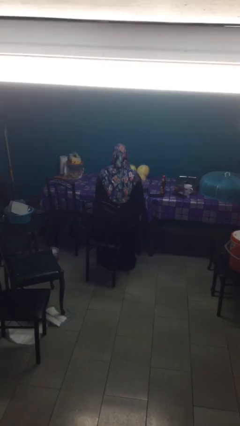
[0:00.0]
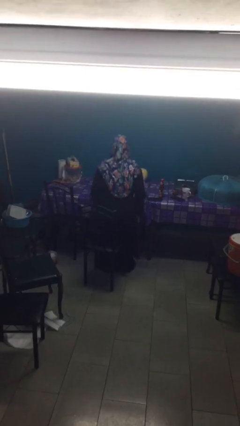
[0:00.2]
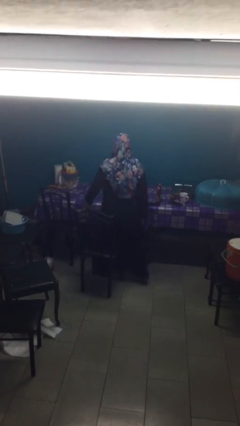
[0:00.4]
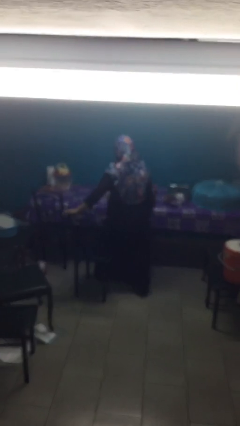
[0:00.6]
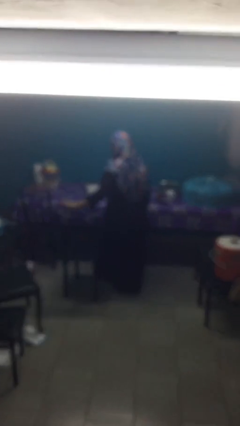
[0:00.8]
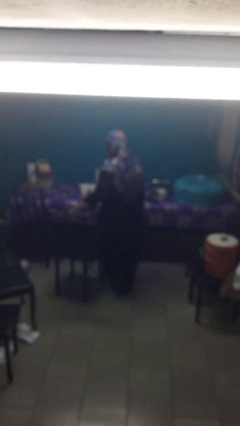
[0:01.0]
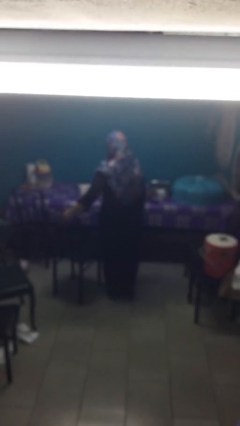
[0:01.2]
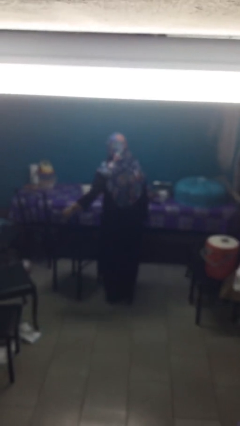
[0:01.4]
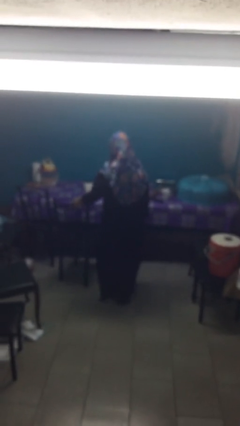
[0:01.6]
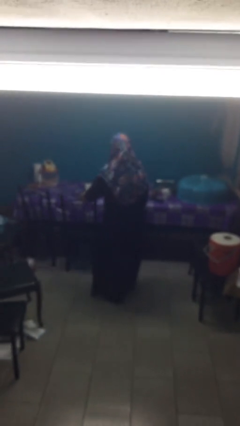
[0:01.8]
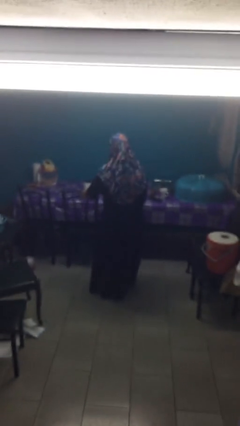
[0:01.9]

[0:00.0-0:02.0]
person stands up

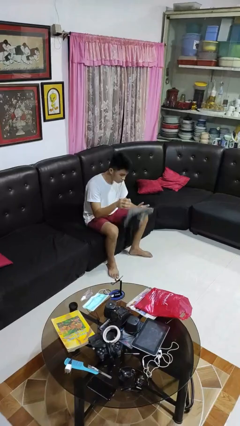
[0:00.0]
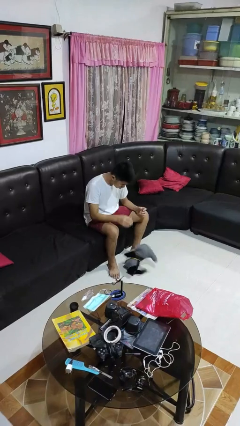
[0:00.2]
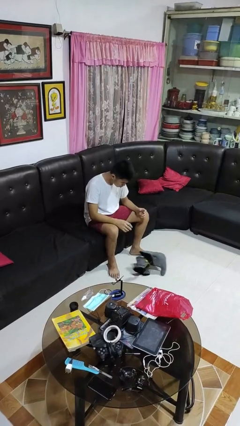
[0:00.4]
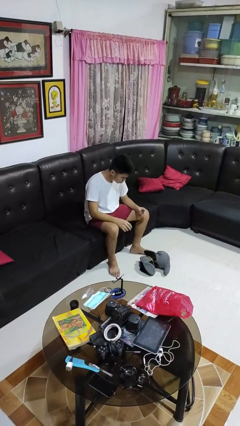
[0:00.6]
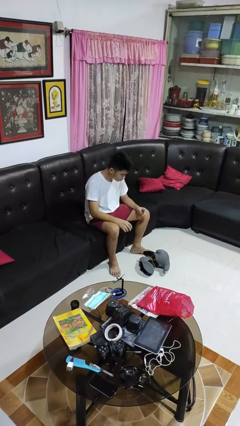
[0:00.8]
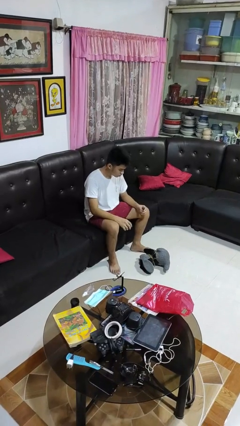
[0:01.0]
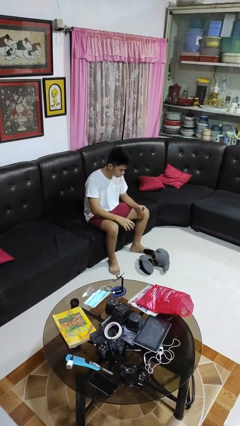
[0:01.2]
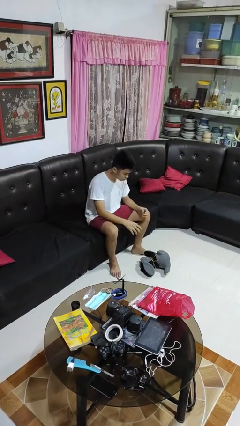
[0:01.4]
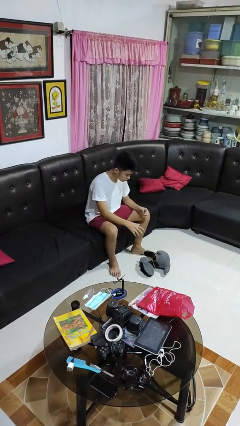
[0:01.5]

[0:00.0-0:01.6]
person drops object

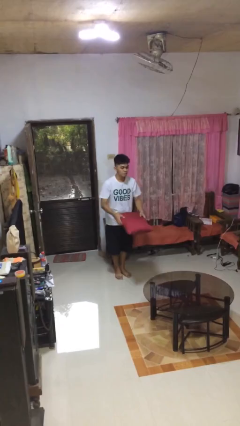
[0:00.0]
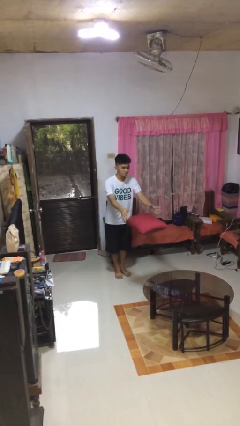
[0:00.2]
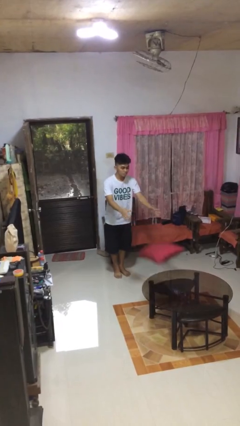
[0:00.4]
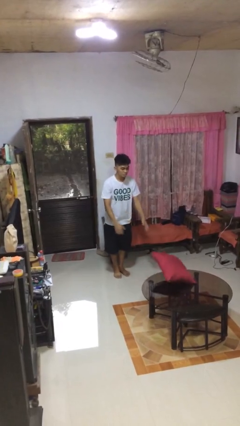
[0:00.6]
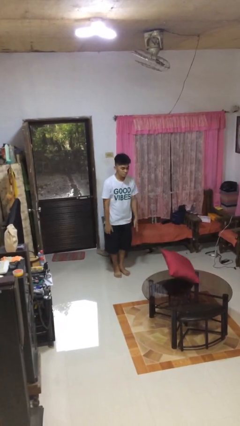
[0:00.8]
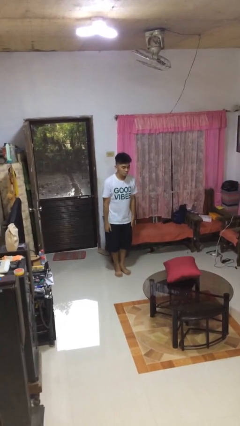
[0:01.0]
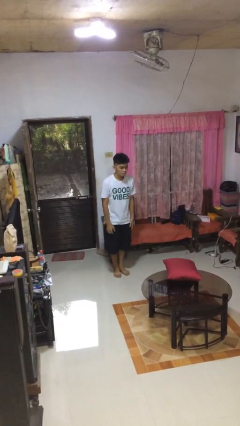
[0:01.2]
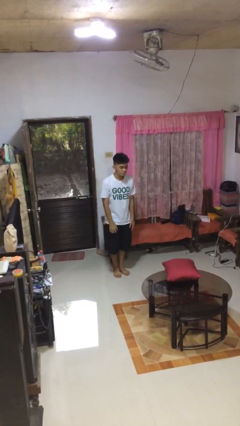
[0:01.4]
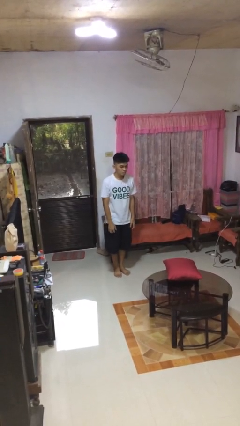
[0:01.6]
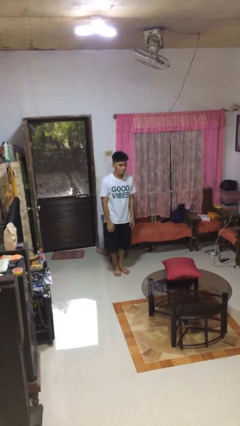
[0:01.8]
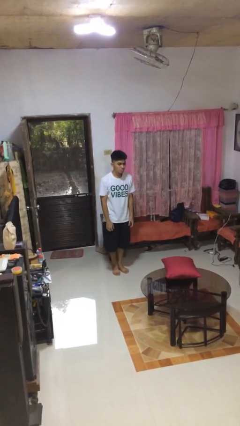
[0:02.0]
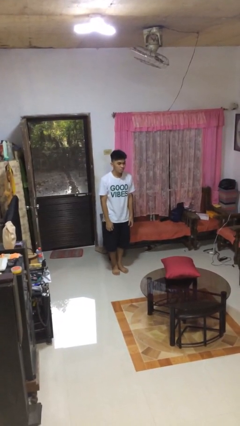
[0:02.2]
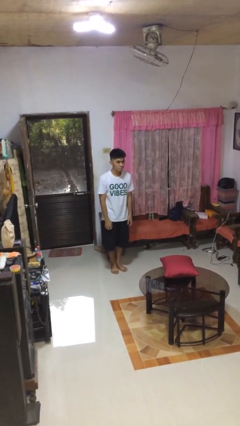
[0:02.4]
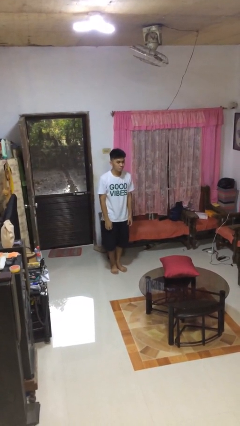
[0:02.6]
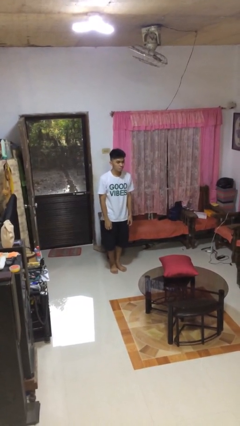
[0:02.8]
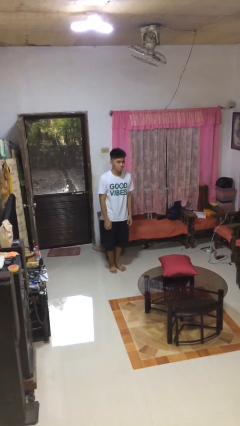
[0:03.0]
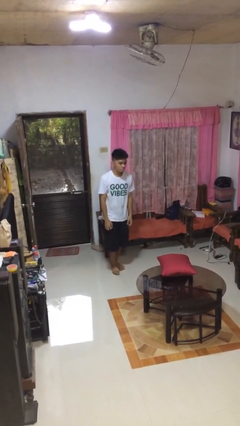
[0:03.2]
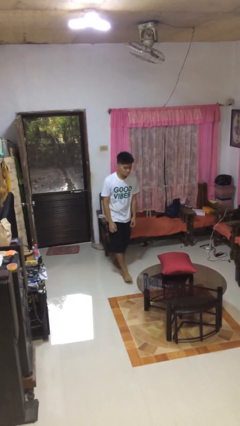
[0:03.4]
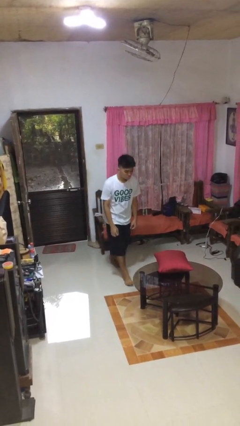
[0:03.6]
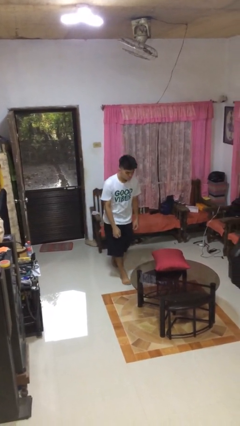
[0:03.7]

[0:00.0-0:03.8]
person throws object on table

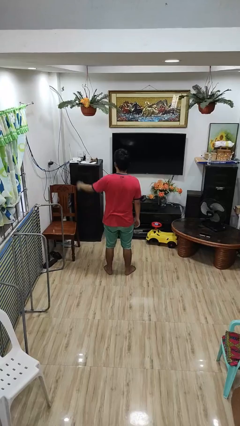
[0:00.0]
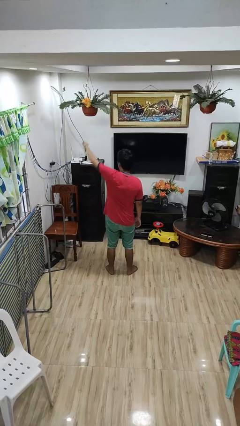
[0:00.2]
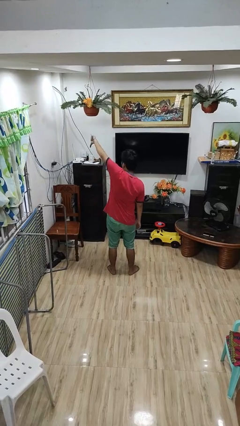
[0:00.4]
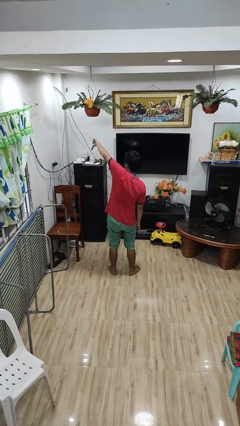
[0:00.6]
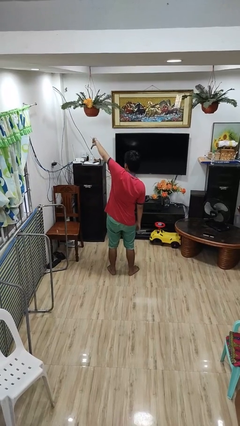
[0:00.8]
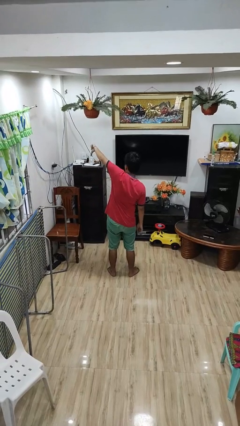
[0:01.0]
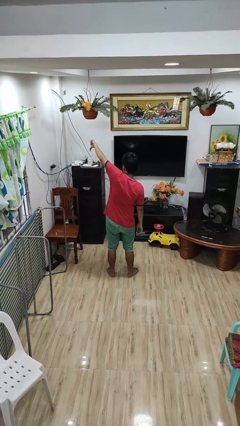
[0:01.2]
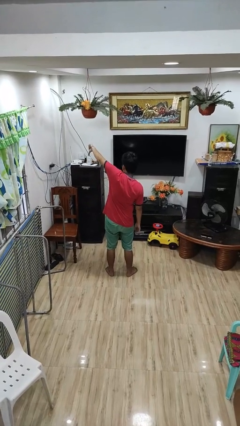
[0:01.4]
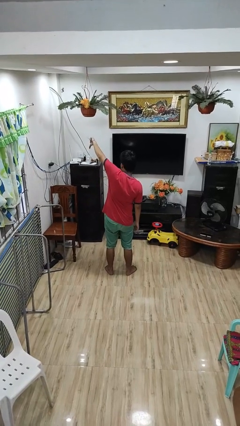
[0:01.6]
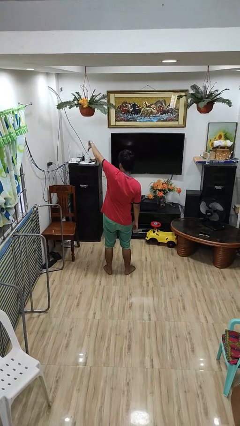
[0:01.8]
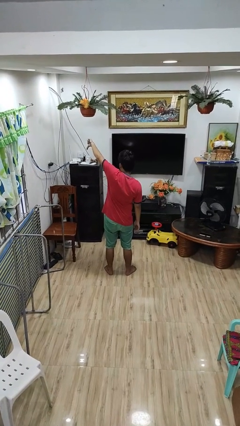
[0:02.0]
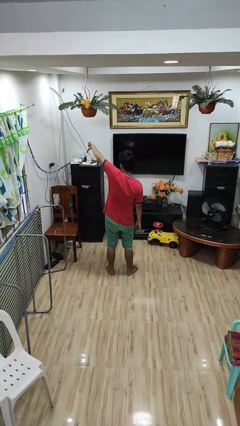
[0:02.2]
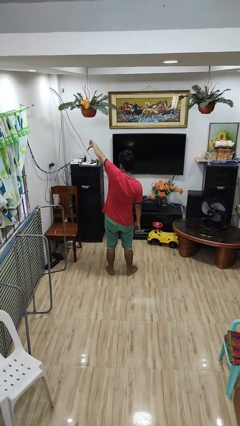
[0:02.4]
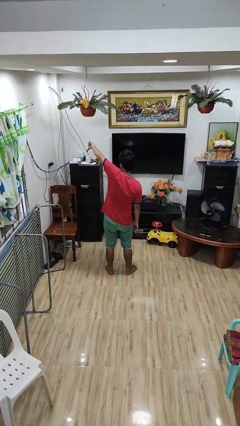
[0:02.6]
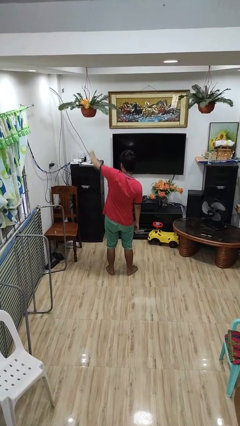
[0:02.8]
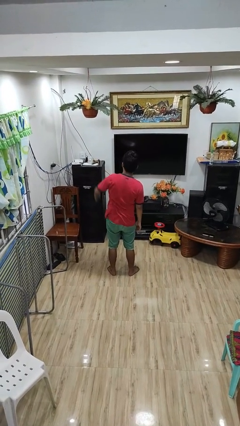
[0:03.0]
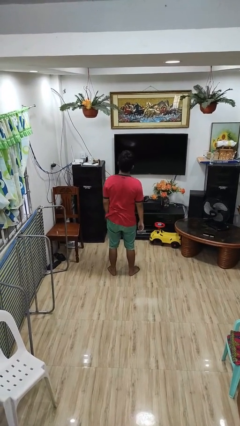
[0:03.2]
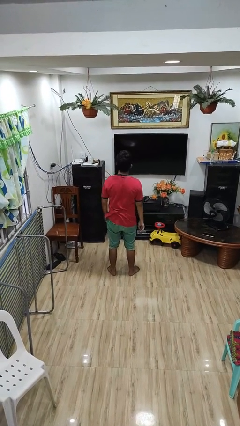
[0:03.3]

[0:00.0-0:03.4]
person gestures thumbs down

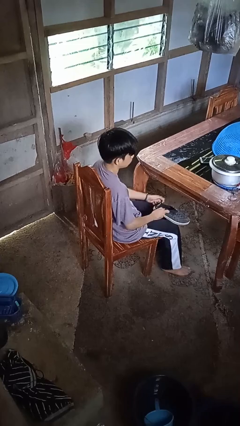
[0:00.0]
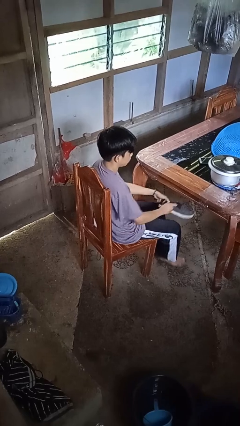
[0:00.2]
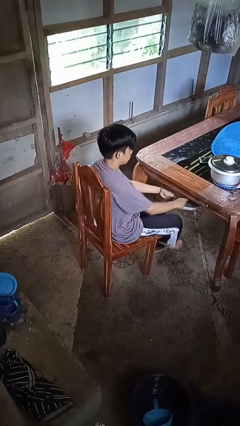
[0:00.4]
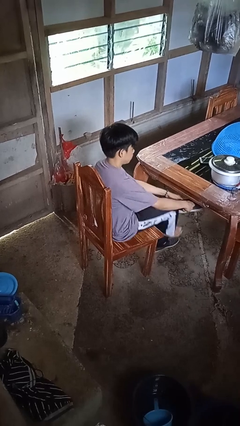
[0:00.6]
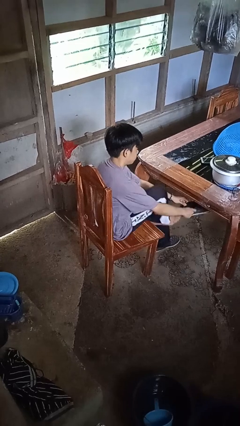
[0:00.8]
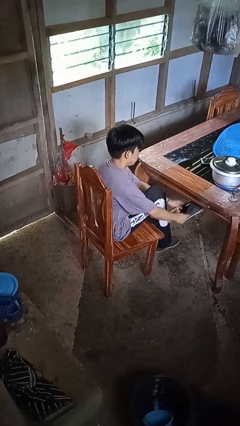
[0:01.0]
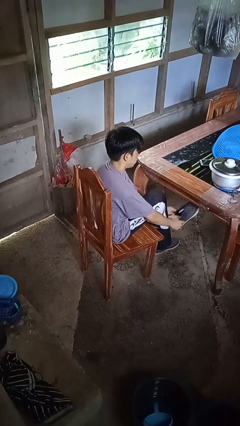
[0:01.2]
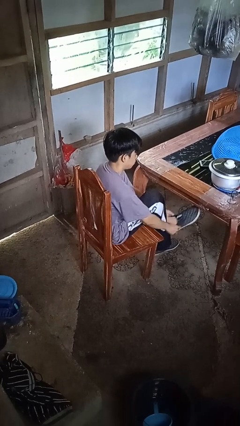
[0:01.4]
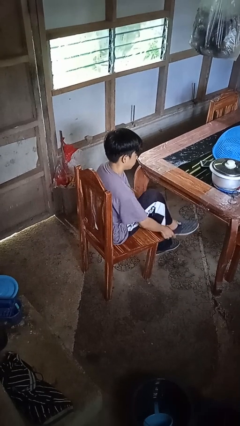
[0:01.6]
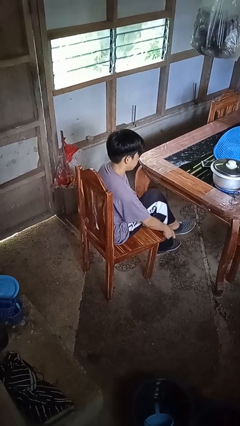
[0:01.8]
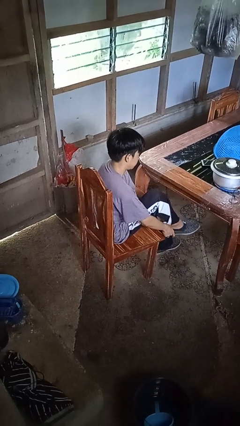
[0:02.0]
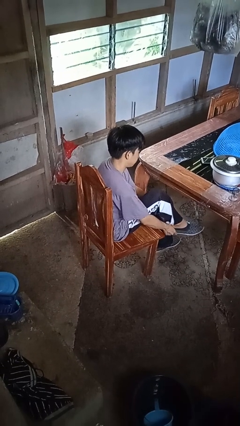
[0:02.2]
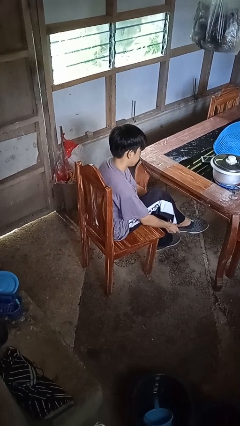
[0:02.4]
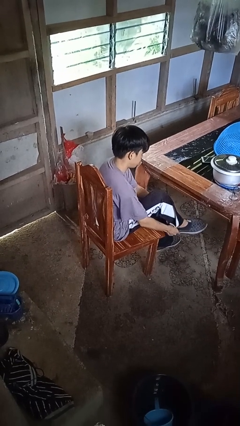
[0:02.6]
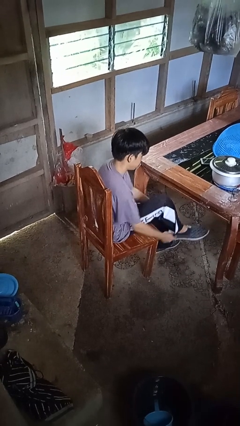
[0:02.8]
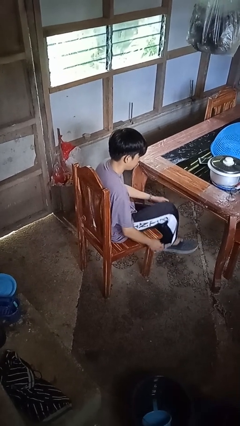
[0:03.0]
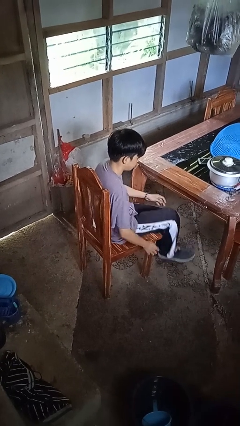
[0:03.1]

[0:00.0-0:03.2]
person puts on shoes

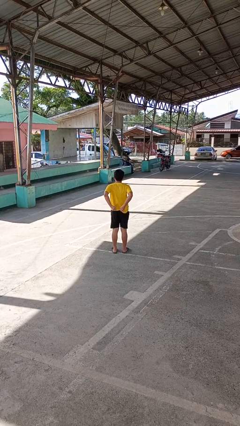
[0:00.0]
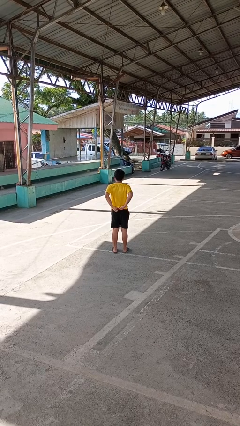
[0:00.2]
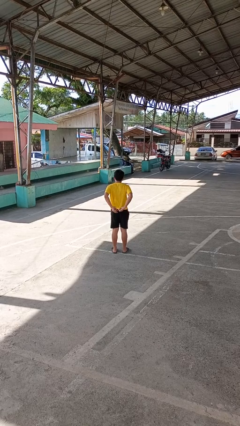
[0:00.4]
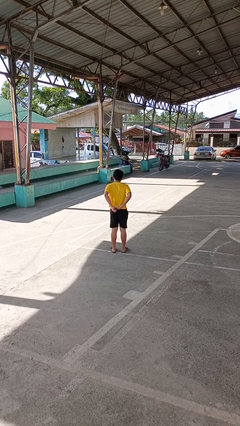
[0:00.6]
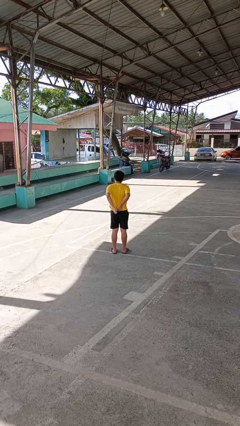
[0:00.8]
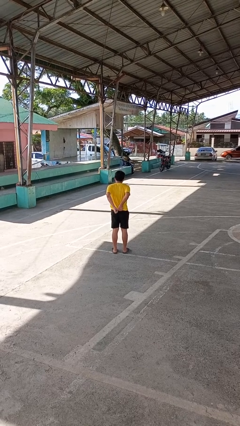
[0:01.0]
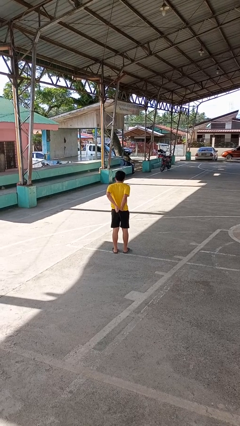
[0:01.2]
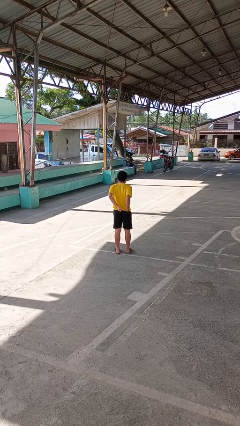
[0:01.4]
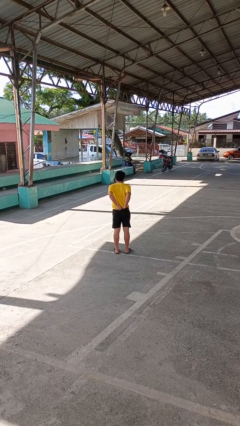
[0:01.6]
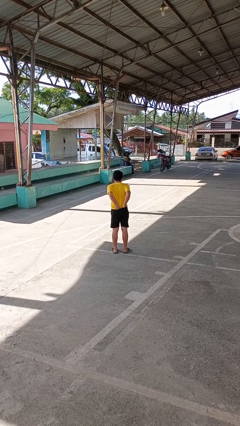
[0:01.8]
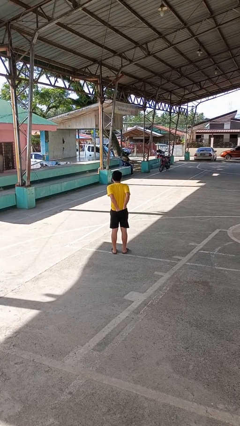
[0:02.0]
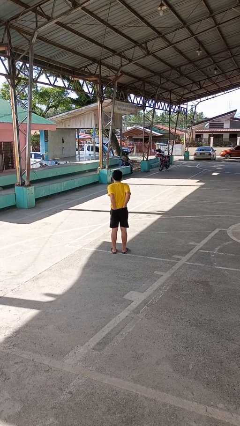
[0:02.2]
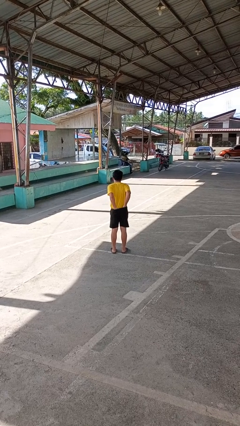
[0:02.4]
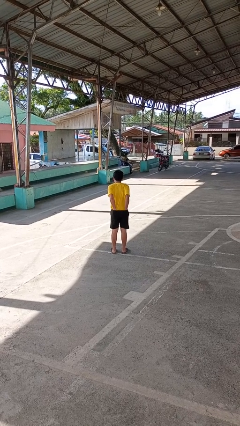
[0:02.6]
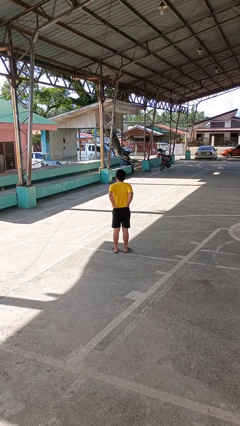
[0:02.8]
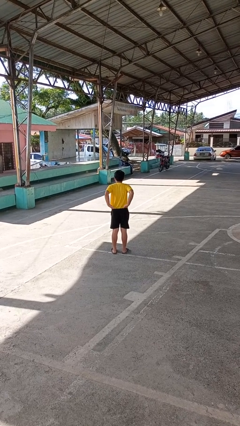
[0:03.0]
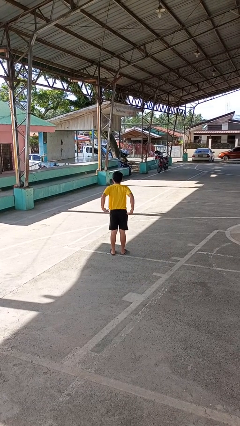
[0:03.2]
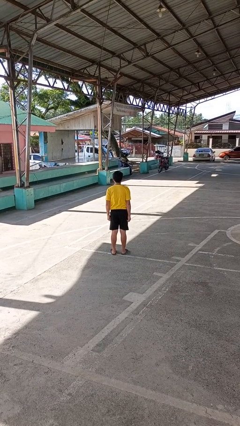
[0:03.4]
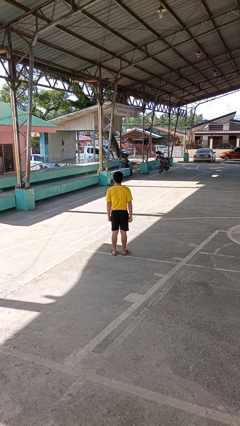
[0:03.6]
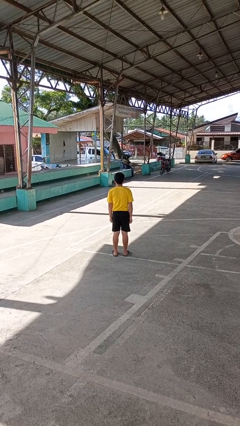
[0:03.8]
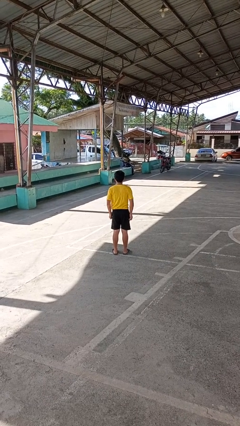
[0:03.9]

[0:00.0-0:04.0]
person tucks in shirt
